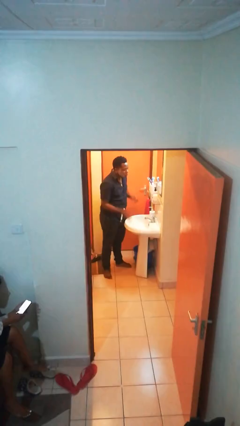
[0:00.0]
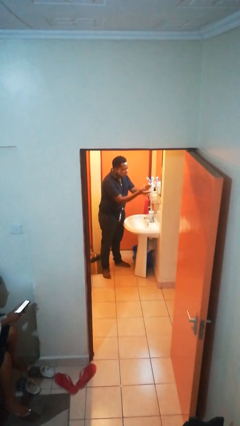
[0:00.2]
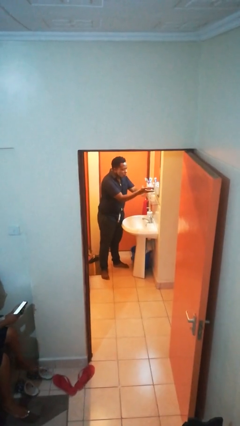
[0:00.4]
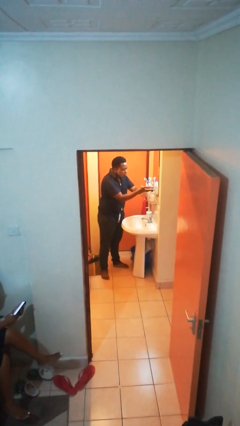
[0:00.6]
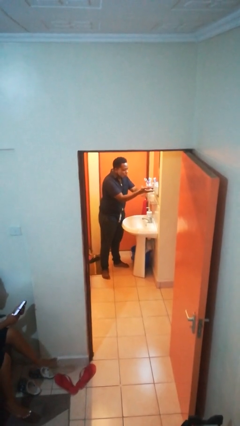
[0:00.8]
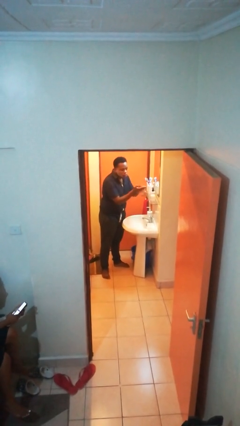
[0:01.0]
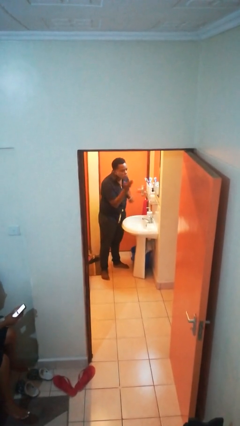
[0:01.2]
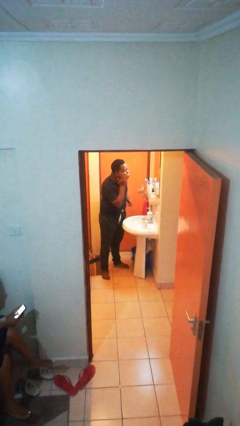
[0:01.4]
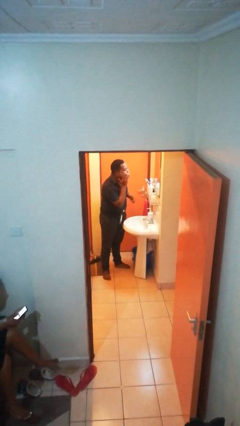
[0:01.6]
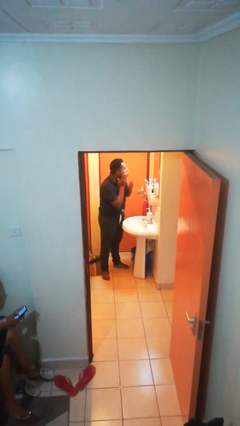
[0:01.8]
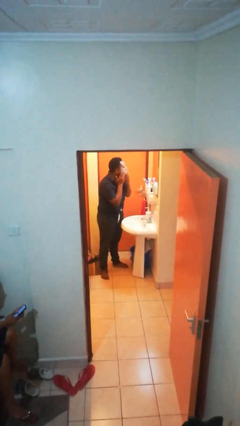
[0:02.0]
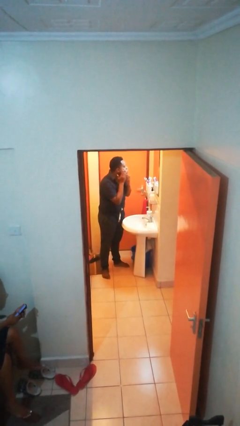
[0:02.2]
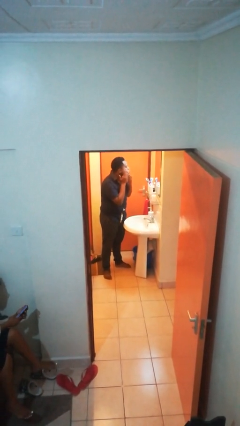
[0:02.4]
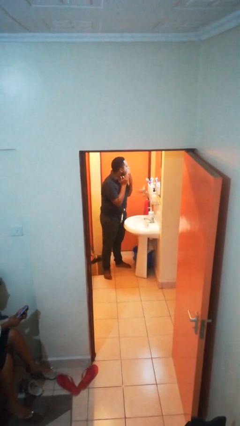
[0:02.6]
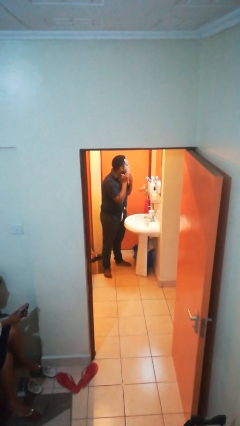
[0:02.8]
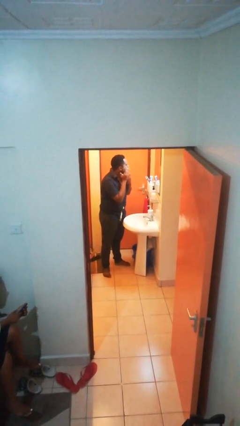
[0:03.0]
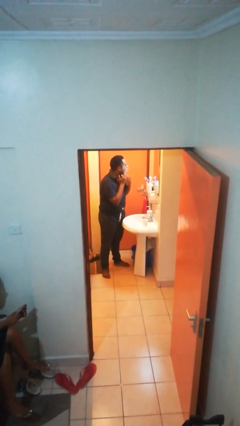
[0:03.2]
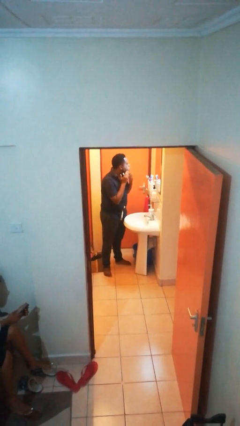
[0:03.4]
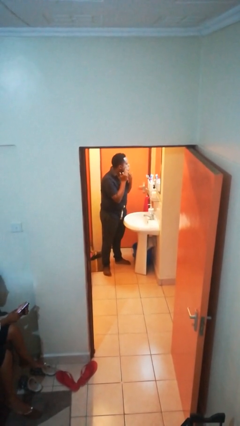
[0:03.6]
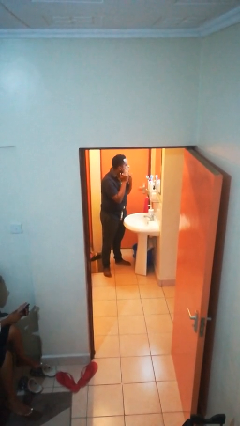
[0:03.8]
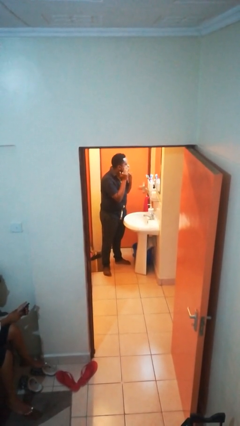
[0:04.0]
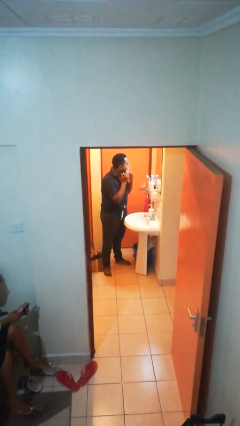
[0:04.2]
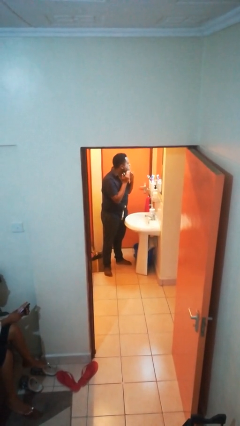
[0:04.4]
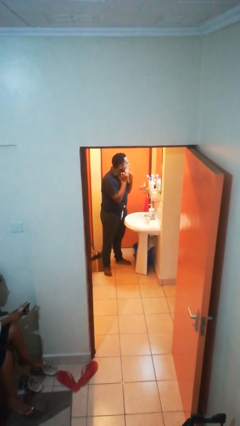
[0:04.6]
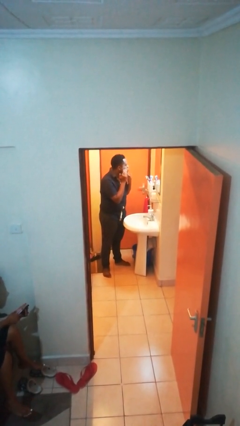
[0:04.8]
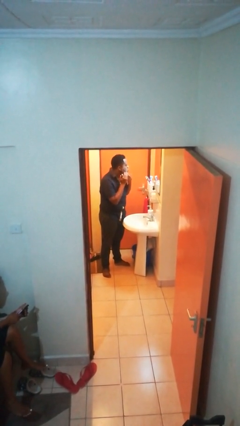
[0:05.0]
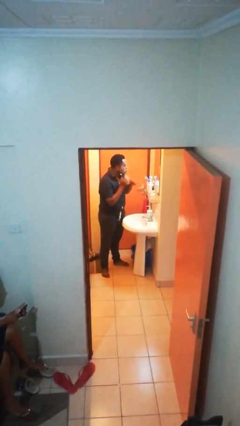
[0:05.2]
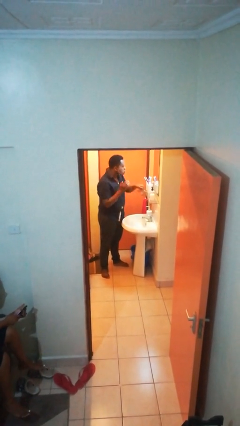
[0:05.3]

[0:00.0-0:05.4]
person applies shaving cream

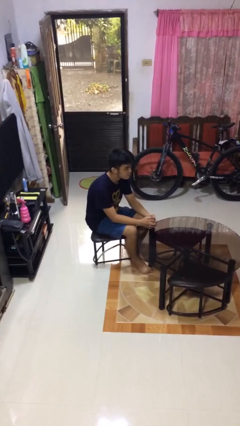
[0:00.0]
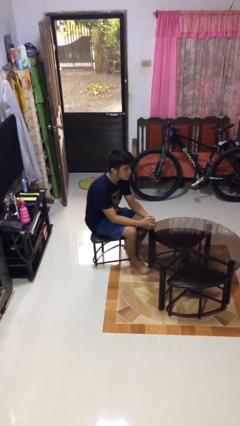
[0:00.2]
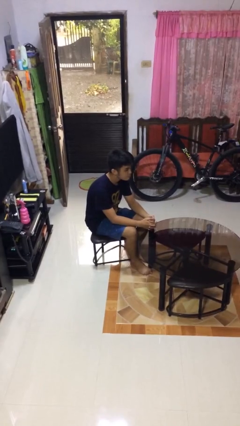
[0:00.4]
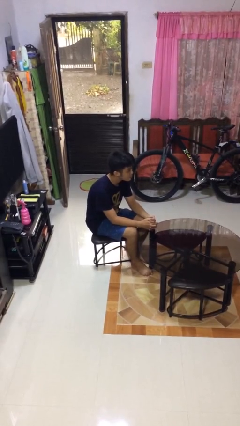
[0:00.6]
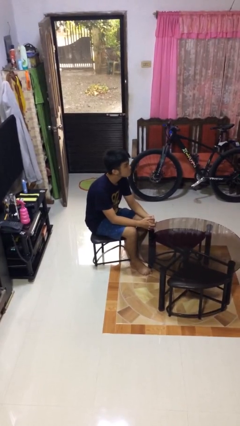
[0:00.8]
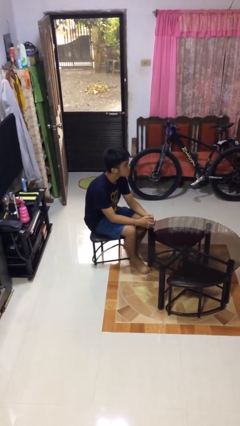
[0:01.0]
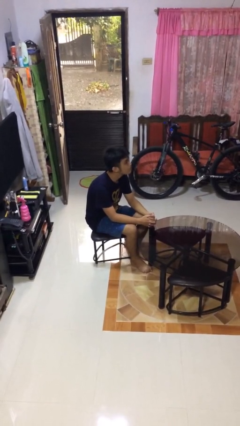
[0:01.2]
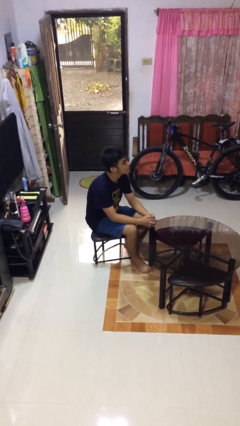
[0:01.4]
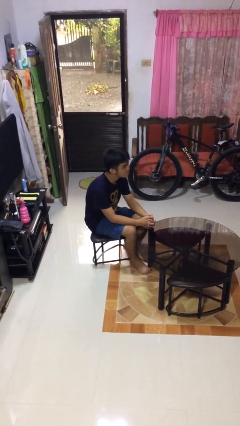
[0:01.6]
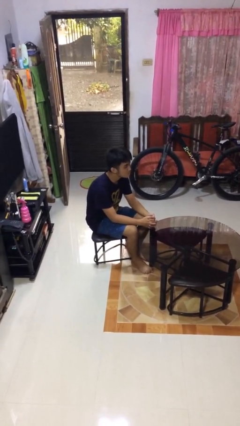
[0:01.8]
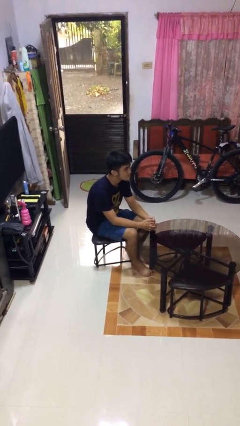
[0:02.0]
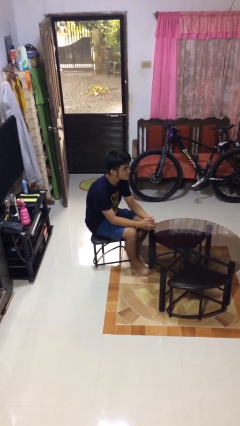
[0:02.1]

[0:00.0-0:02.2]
person nods head

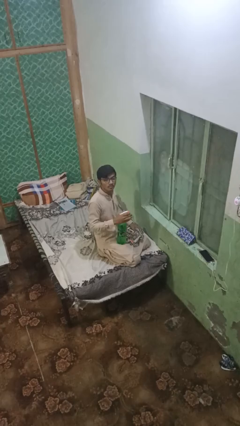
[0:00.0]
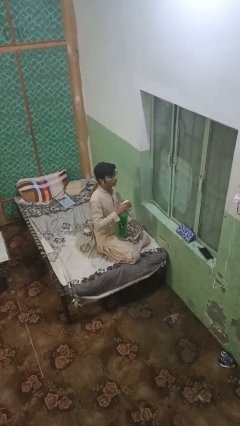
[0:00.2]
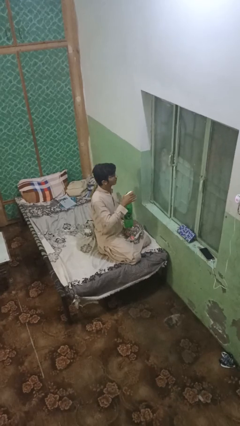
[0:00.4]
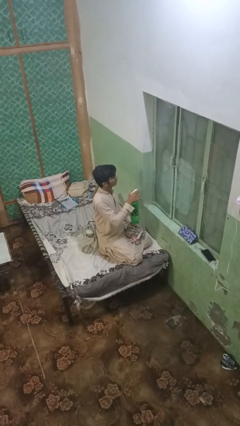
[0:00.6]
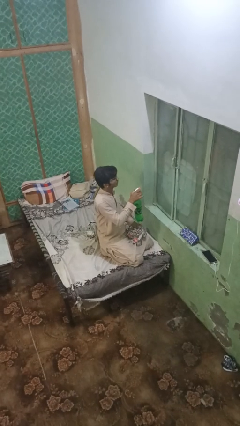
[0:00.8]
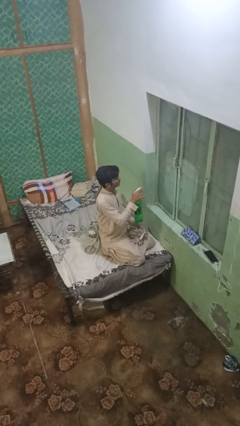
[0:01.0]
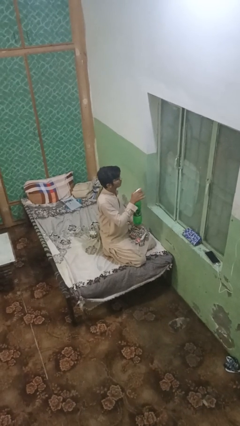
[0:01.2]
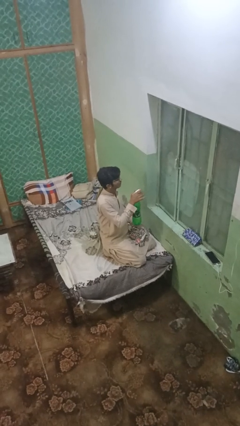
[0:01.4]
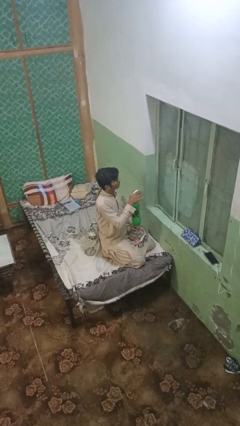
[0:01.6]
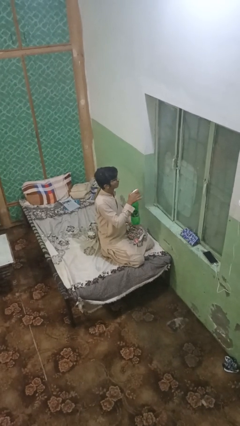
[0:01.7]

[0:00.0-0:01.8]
person sprays from bottle

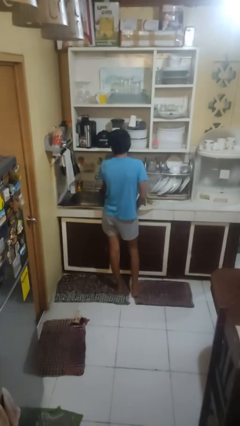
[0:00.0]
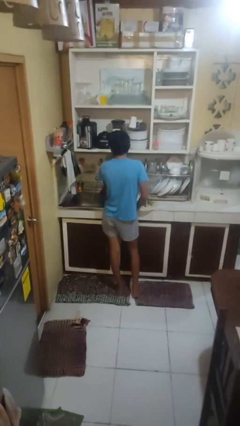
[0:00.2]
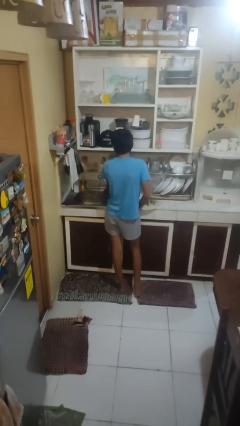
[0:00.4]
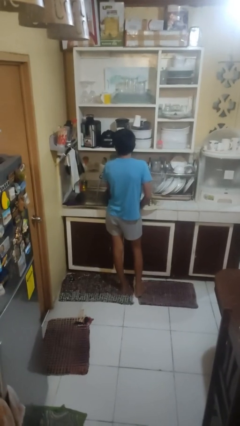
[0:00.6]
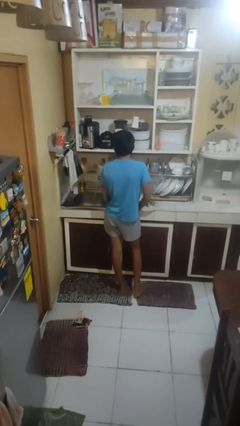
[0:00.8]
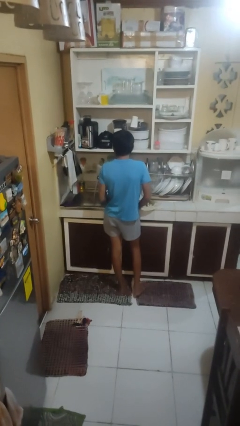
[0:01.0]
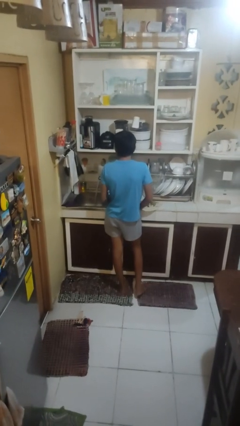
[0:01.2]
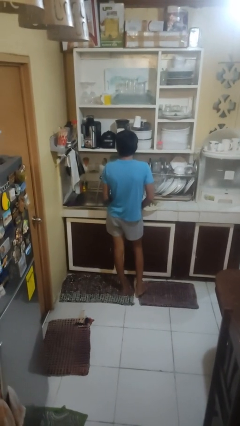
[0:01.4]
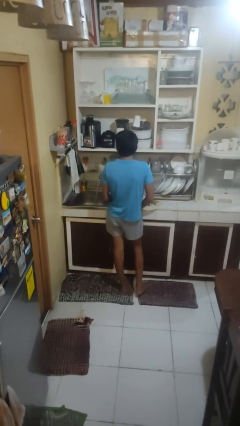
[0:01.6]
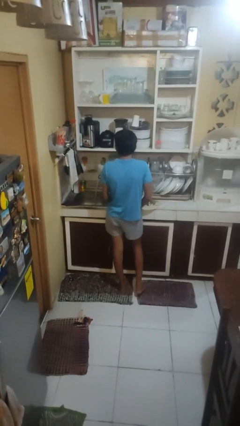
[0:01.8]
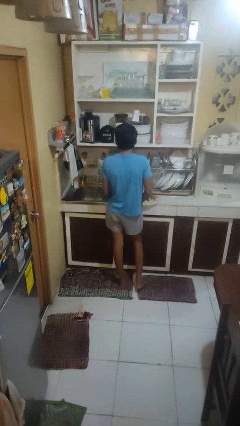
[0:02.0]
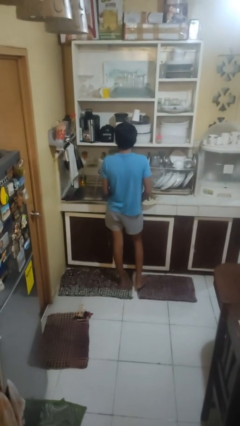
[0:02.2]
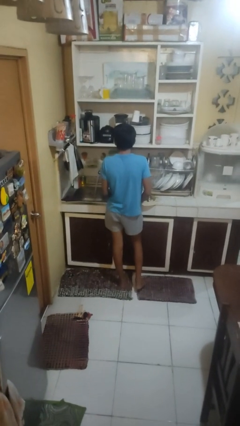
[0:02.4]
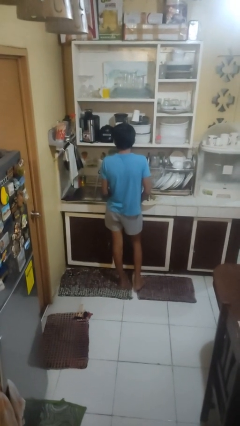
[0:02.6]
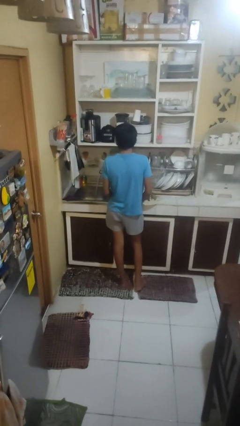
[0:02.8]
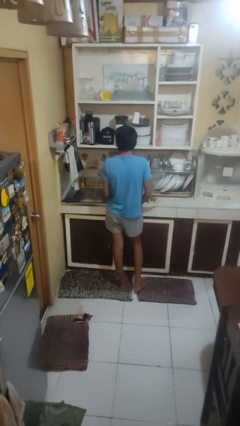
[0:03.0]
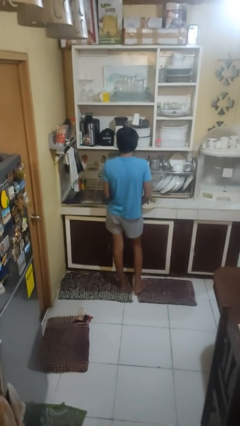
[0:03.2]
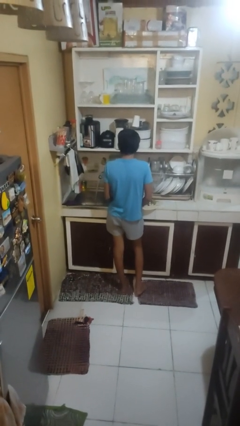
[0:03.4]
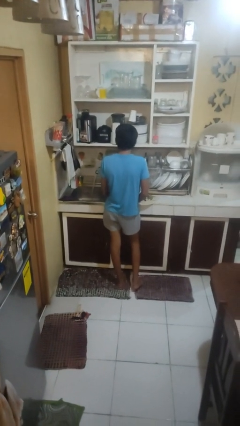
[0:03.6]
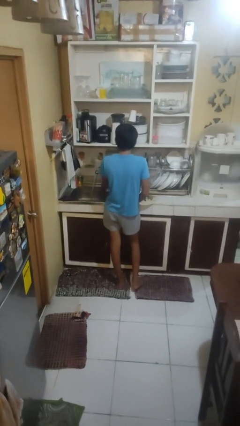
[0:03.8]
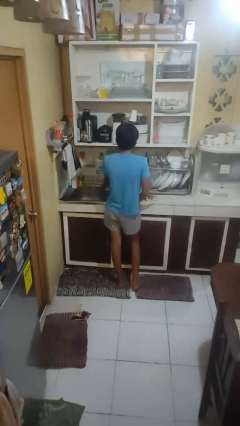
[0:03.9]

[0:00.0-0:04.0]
person opens dishwasher

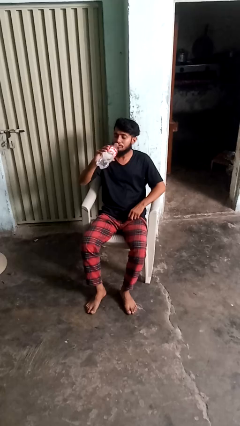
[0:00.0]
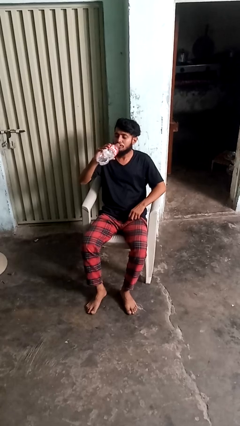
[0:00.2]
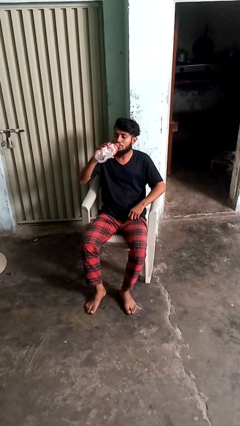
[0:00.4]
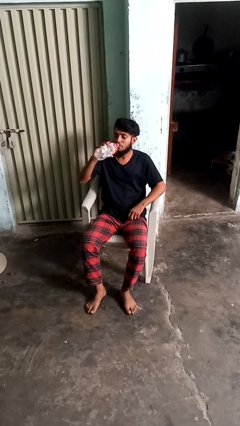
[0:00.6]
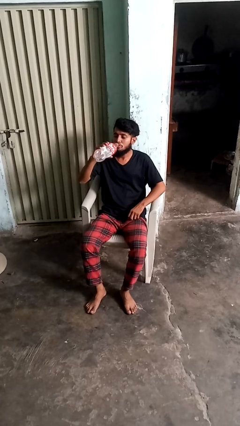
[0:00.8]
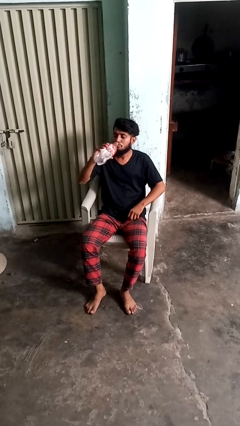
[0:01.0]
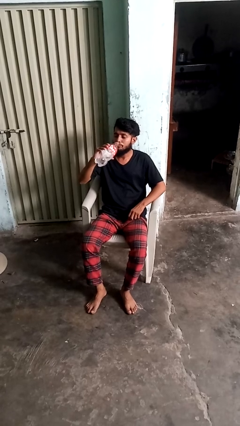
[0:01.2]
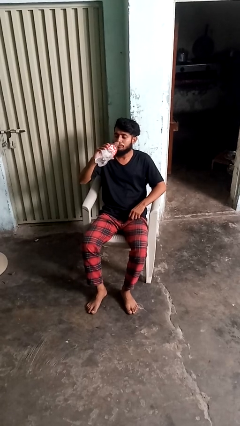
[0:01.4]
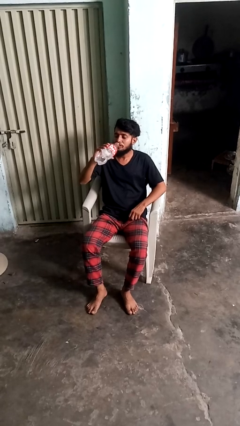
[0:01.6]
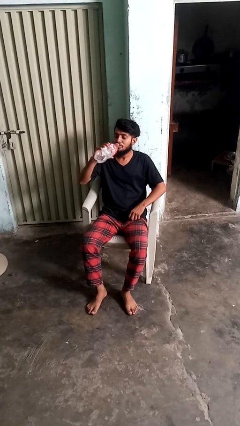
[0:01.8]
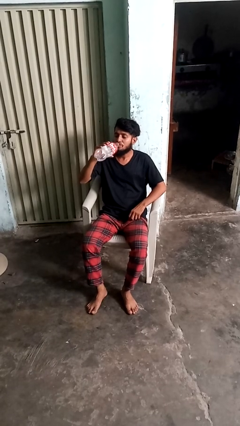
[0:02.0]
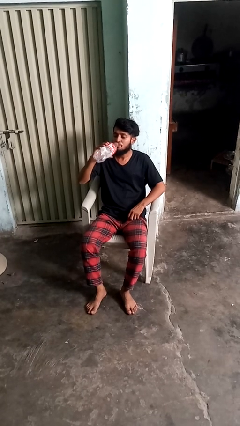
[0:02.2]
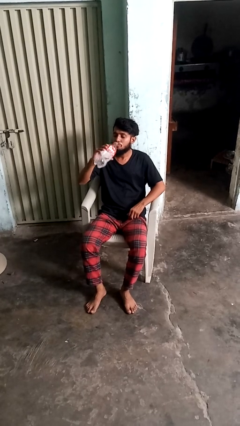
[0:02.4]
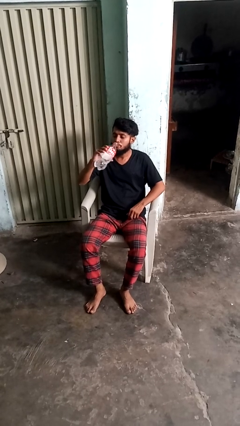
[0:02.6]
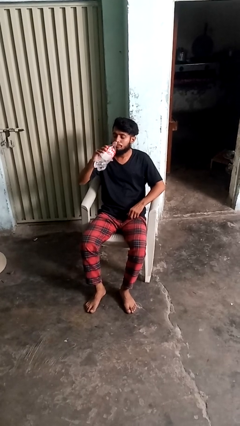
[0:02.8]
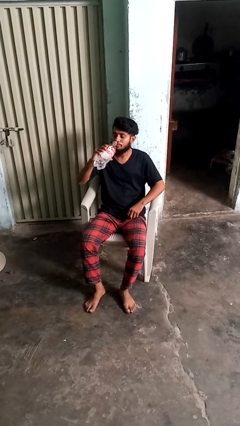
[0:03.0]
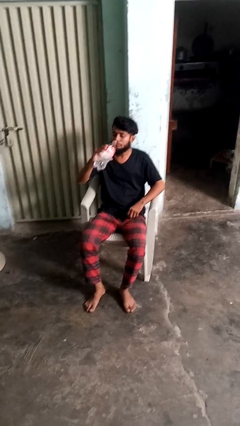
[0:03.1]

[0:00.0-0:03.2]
person drinks from bottle

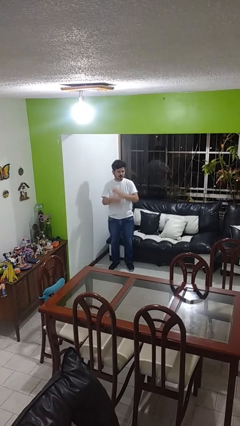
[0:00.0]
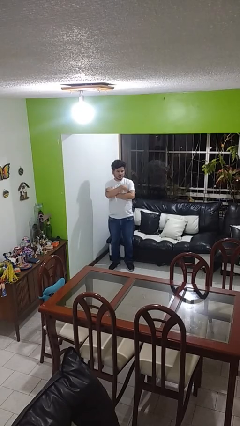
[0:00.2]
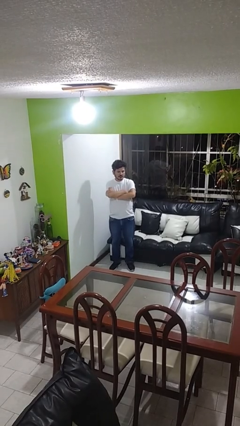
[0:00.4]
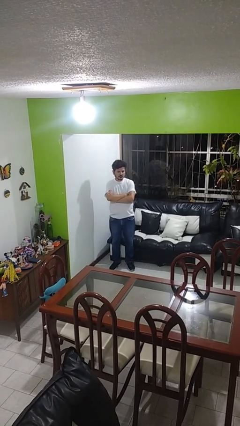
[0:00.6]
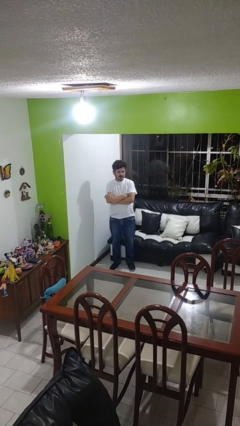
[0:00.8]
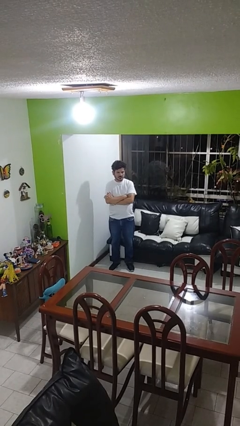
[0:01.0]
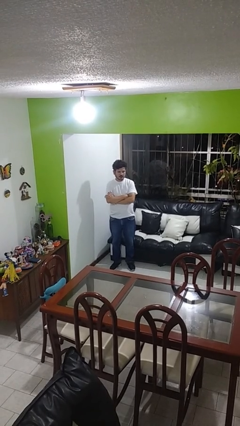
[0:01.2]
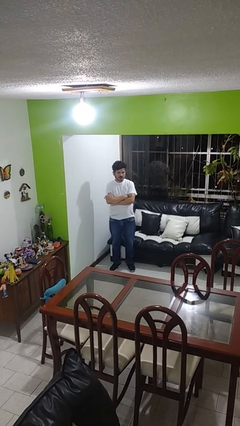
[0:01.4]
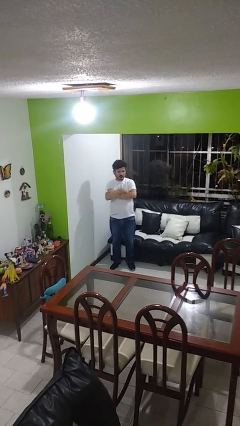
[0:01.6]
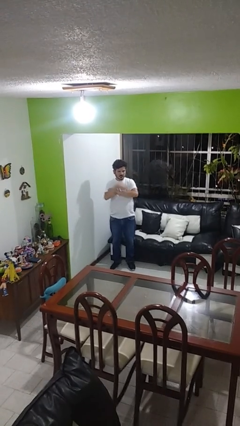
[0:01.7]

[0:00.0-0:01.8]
person crosses arms
